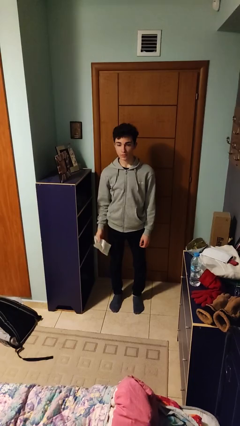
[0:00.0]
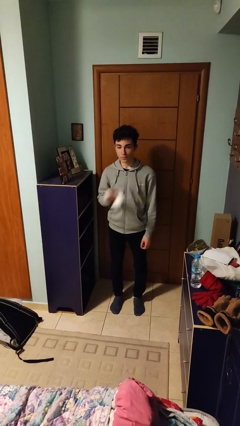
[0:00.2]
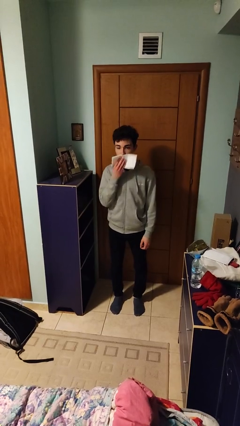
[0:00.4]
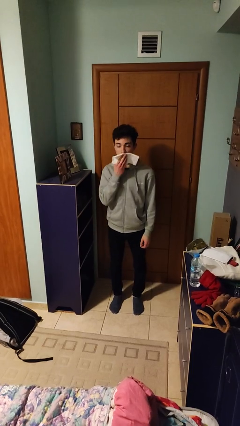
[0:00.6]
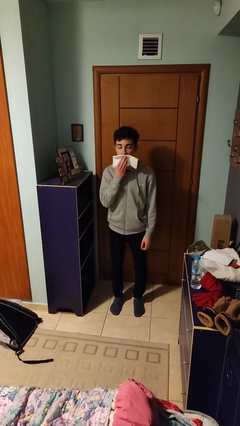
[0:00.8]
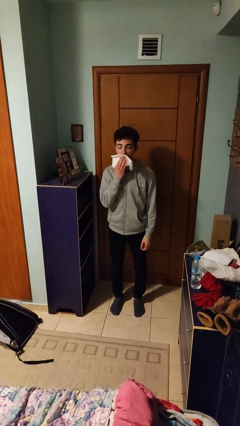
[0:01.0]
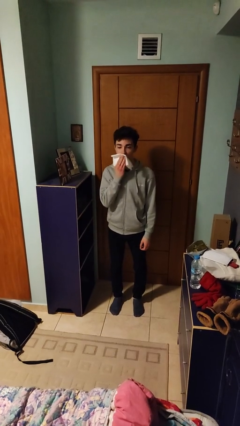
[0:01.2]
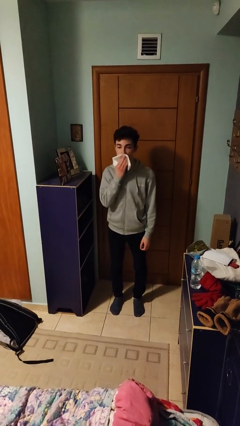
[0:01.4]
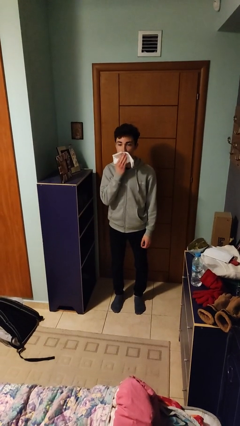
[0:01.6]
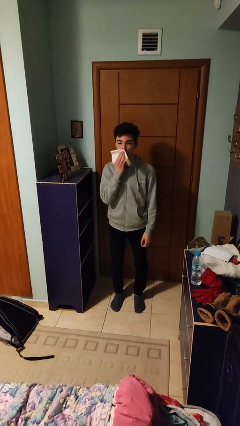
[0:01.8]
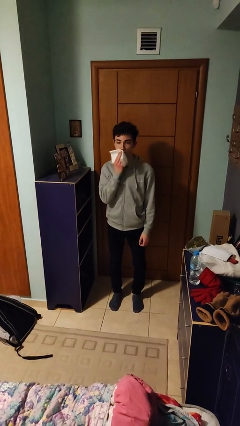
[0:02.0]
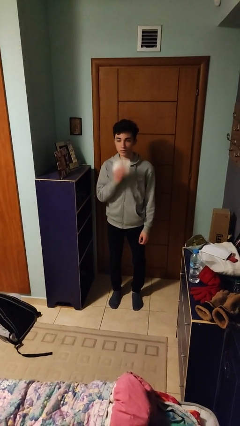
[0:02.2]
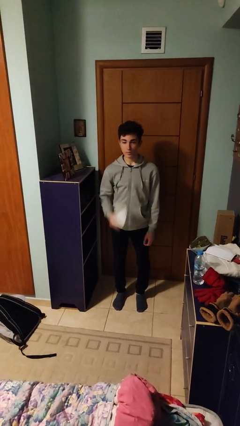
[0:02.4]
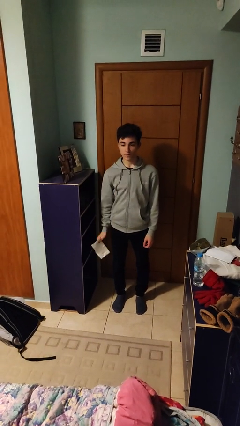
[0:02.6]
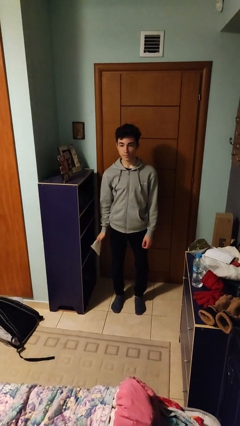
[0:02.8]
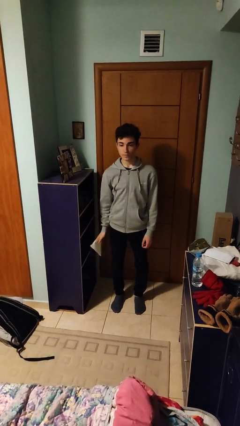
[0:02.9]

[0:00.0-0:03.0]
person wipes mouth with napkin

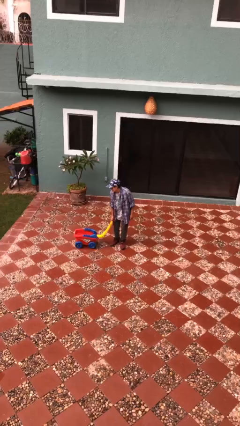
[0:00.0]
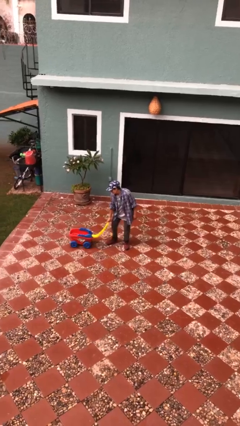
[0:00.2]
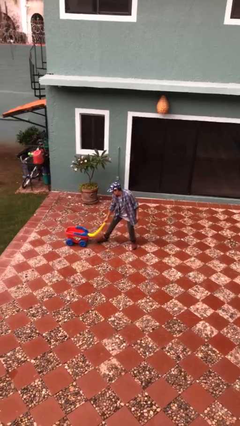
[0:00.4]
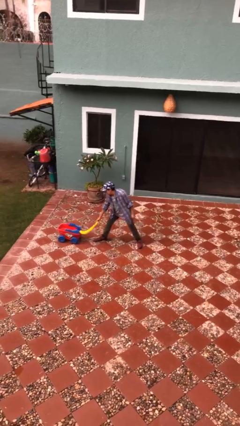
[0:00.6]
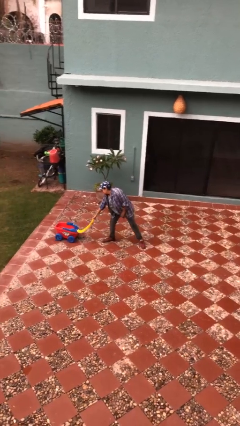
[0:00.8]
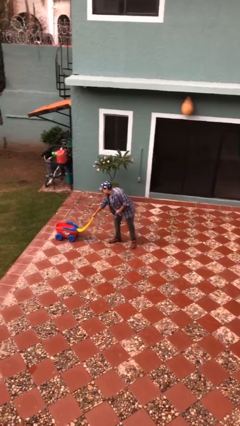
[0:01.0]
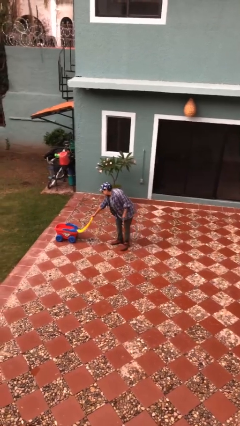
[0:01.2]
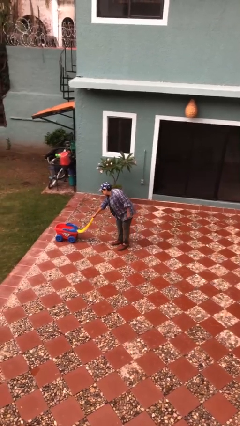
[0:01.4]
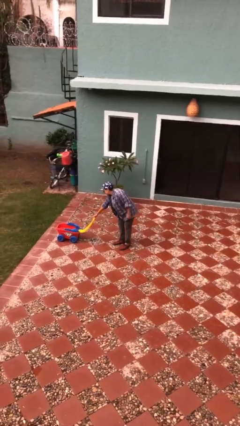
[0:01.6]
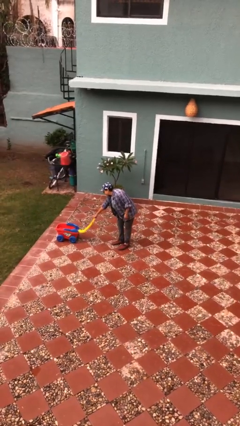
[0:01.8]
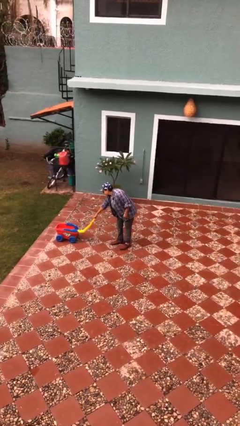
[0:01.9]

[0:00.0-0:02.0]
person pushes wheeled cart

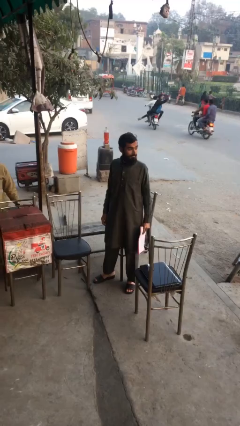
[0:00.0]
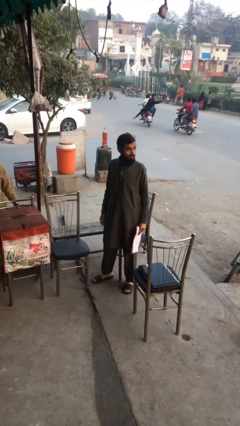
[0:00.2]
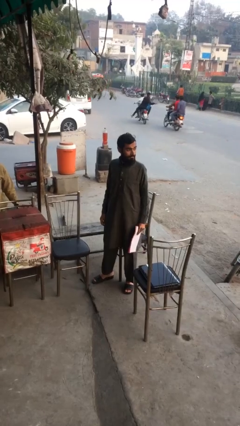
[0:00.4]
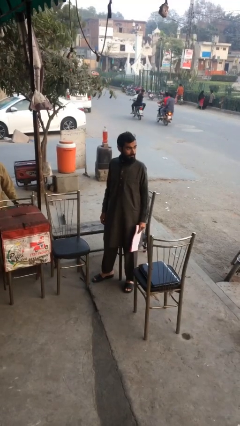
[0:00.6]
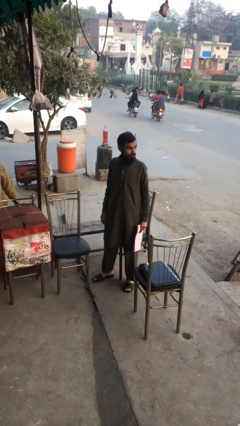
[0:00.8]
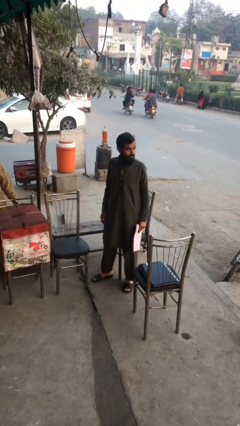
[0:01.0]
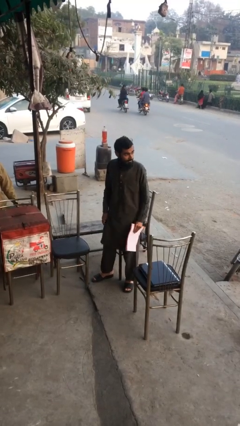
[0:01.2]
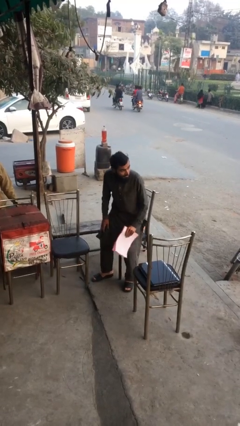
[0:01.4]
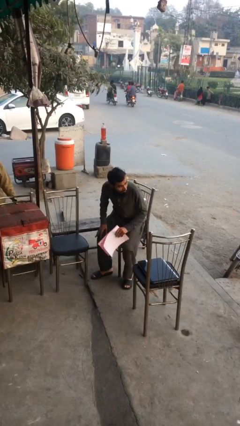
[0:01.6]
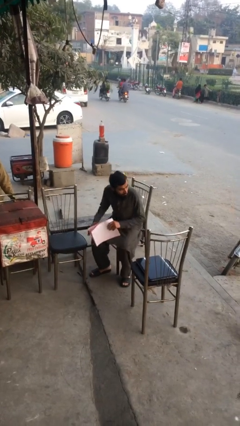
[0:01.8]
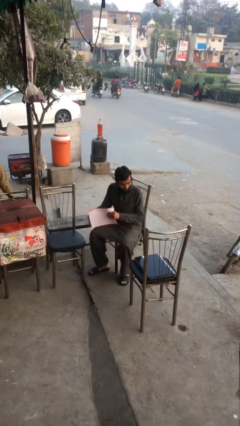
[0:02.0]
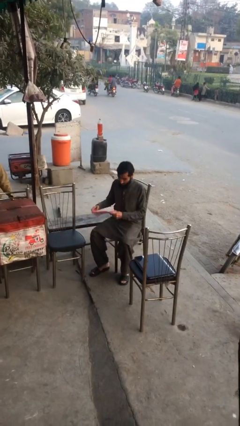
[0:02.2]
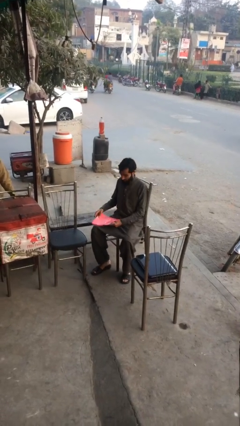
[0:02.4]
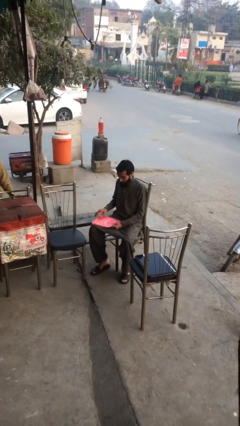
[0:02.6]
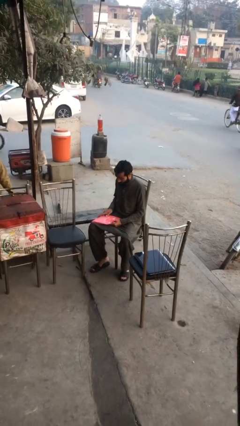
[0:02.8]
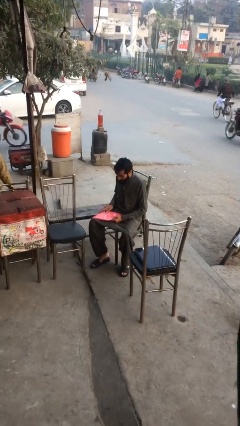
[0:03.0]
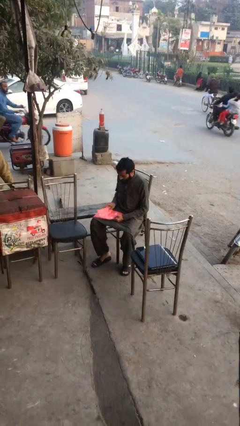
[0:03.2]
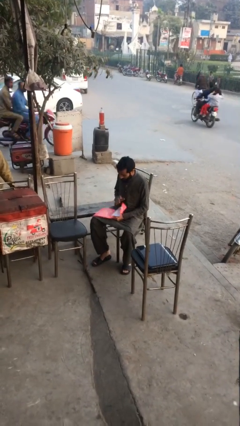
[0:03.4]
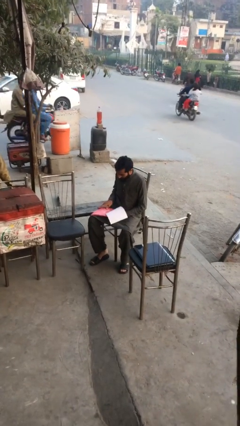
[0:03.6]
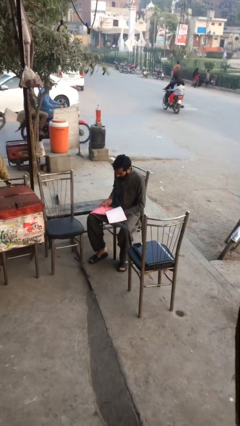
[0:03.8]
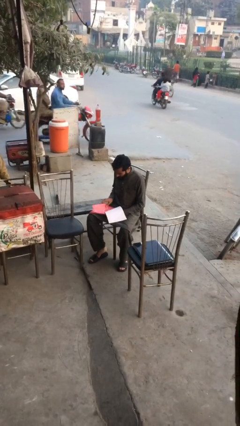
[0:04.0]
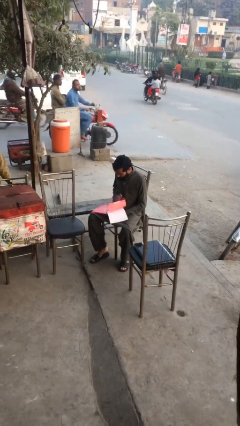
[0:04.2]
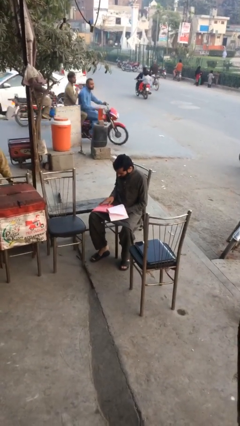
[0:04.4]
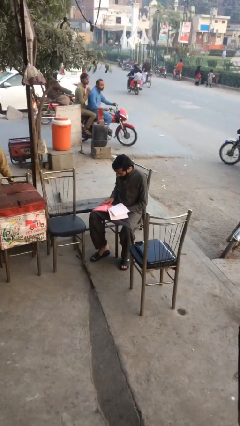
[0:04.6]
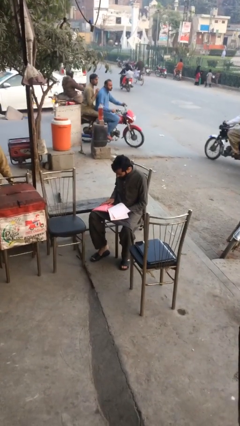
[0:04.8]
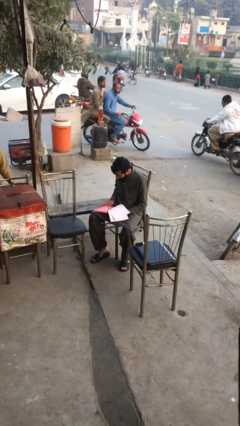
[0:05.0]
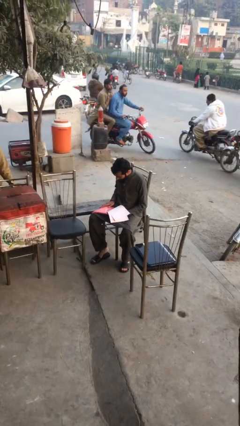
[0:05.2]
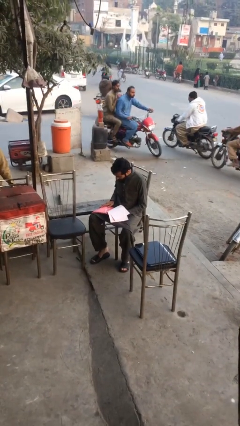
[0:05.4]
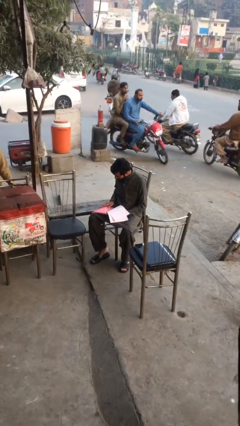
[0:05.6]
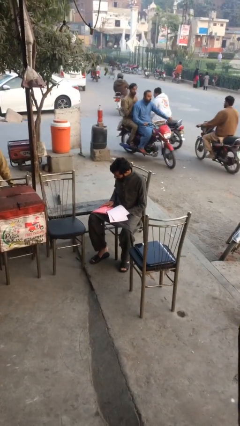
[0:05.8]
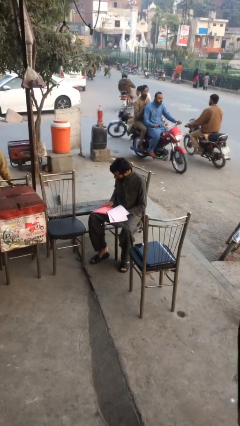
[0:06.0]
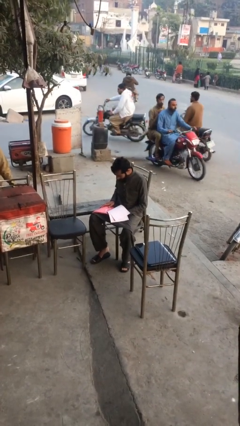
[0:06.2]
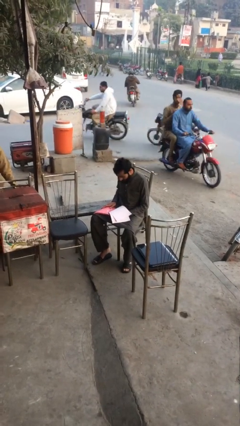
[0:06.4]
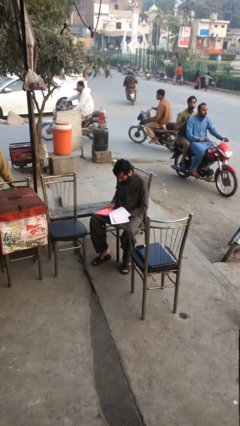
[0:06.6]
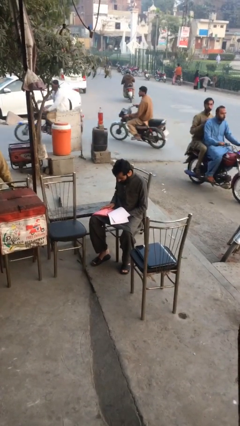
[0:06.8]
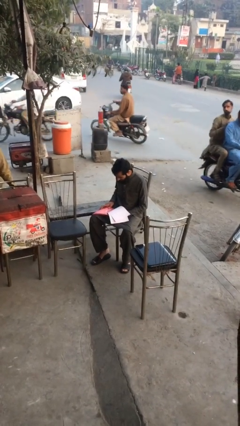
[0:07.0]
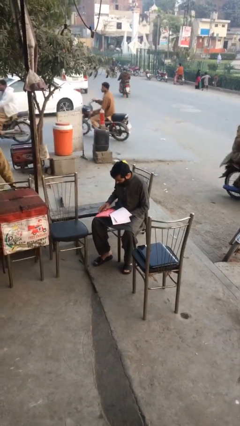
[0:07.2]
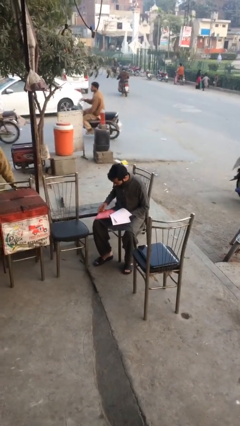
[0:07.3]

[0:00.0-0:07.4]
person reads document

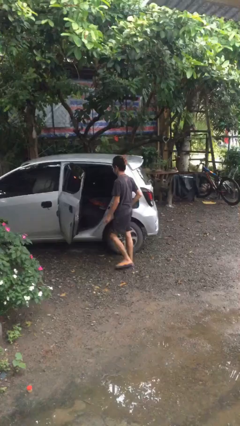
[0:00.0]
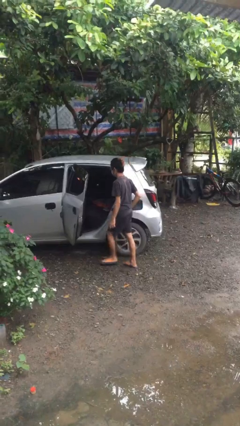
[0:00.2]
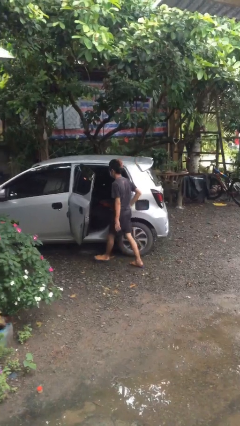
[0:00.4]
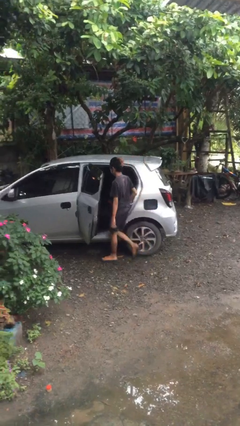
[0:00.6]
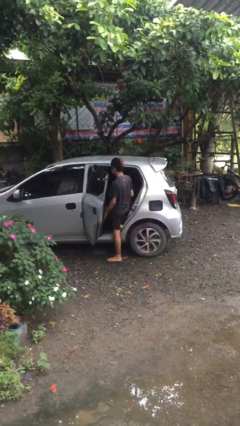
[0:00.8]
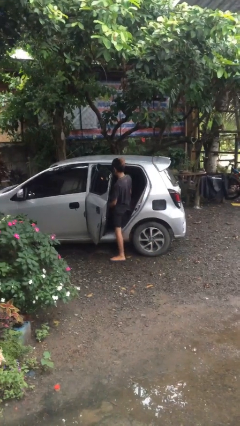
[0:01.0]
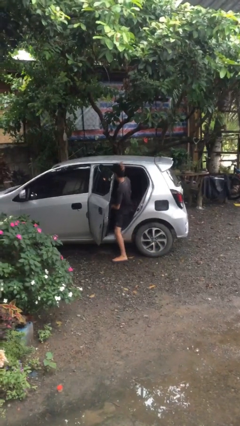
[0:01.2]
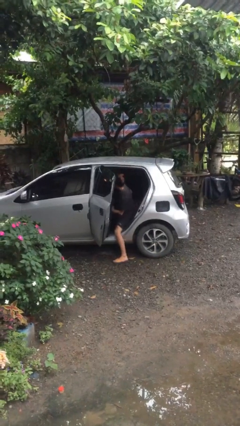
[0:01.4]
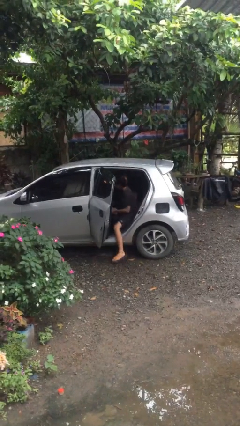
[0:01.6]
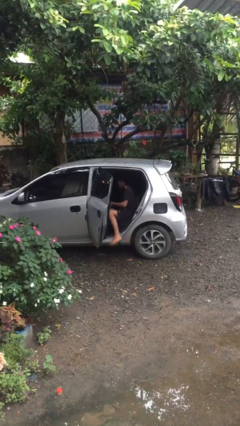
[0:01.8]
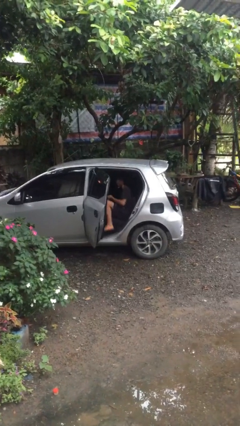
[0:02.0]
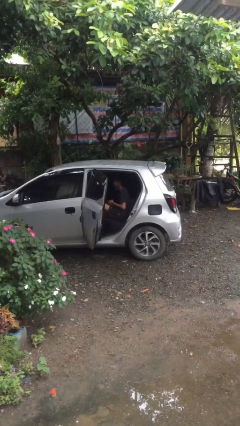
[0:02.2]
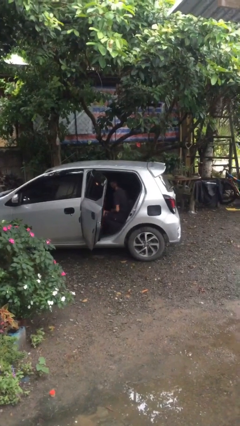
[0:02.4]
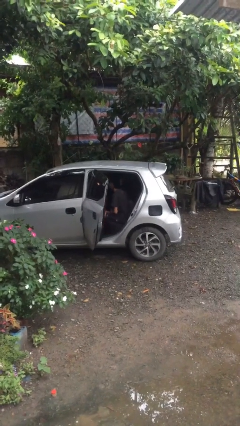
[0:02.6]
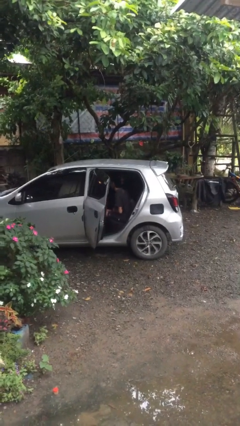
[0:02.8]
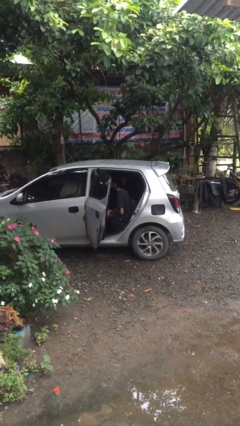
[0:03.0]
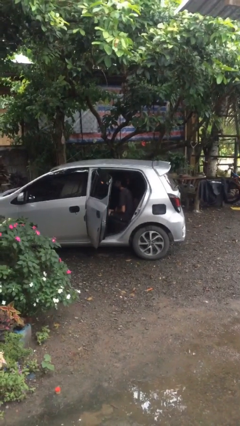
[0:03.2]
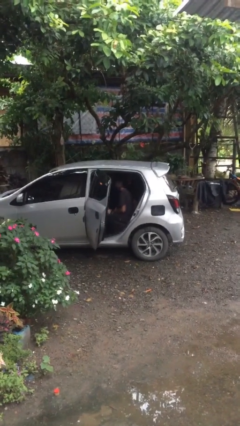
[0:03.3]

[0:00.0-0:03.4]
person enters car

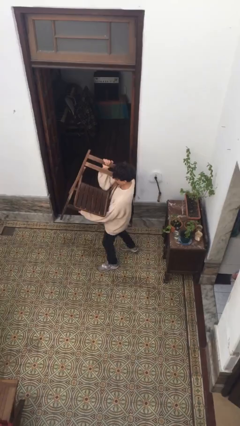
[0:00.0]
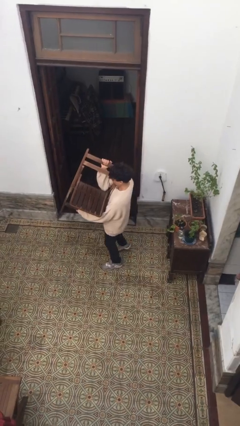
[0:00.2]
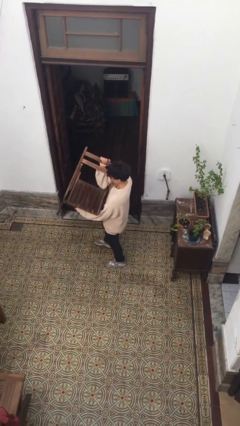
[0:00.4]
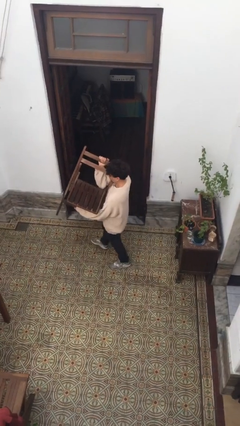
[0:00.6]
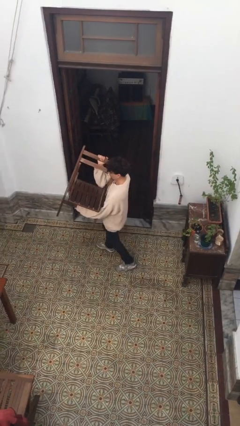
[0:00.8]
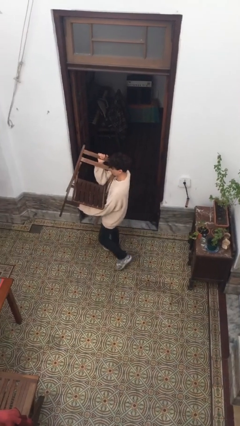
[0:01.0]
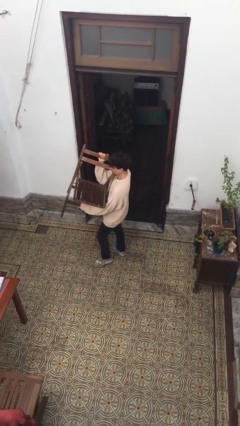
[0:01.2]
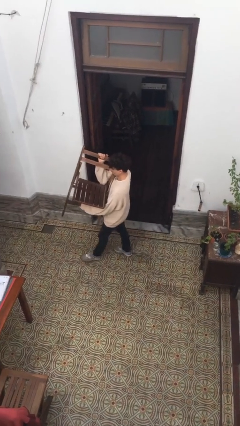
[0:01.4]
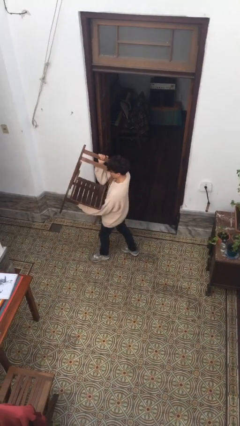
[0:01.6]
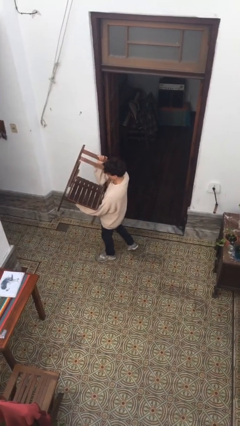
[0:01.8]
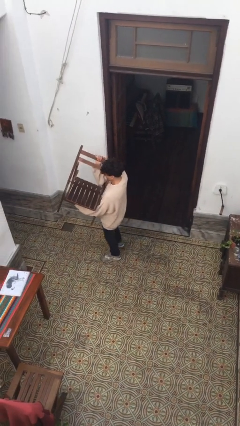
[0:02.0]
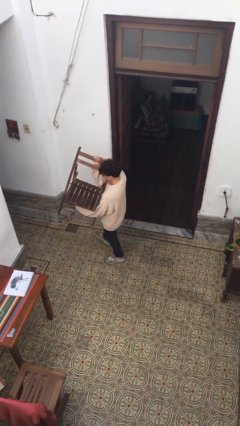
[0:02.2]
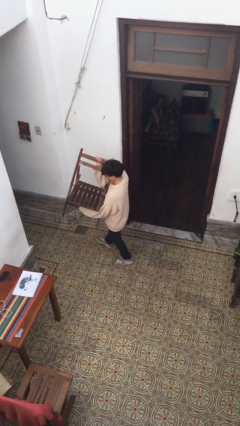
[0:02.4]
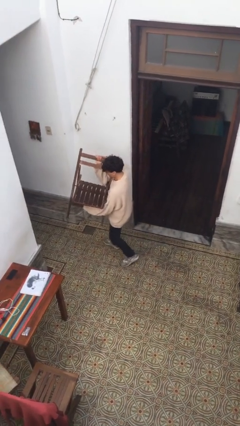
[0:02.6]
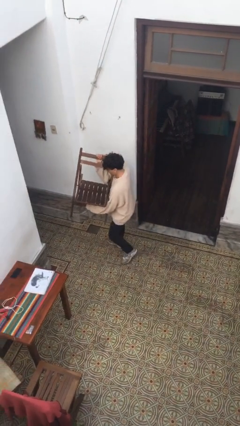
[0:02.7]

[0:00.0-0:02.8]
person carries heavy object
